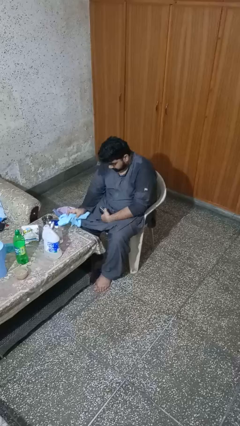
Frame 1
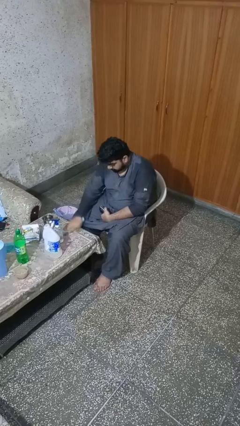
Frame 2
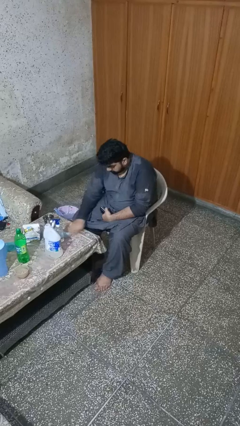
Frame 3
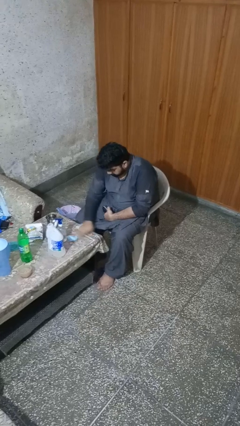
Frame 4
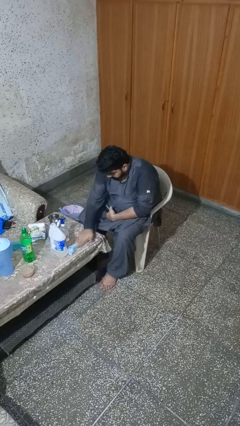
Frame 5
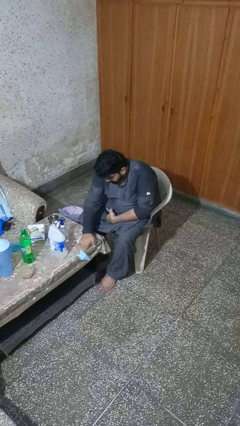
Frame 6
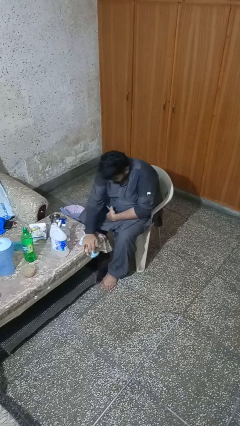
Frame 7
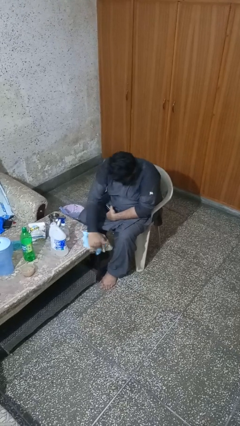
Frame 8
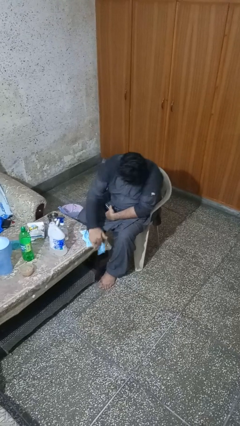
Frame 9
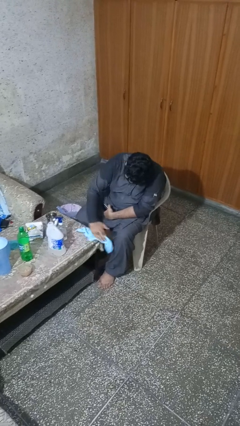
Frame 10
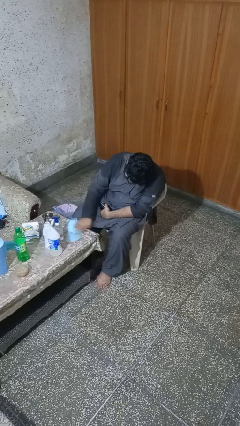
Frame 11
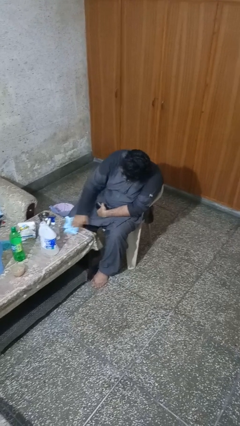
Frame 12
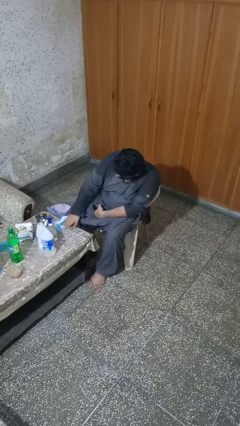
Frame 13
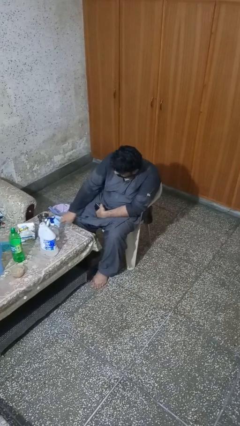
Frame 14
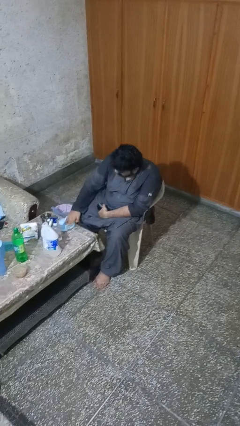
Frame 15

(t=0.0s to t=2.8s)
person cleans table with rag

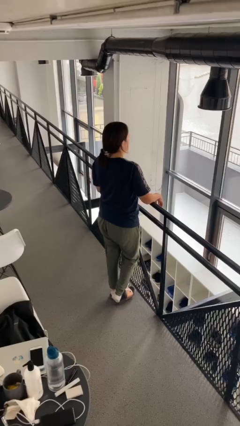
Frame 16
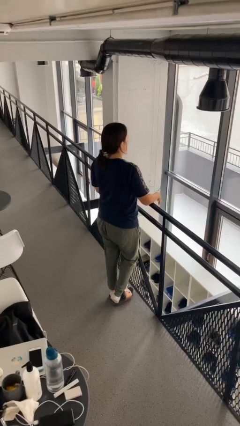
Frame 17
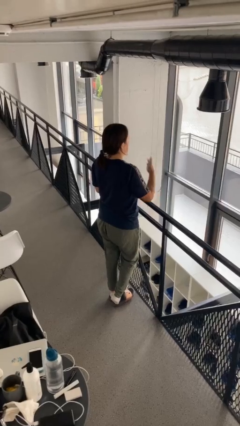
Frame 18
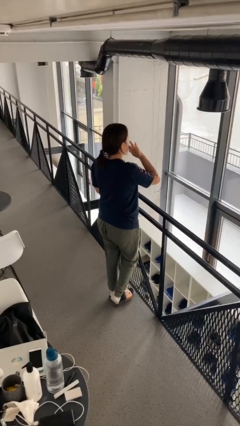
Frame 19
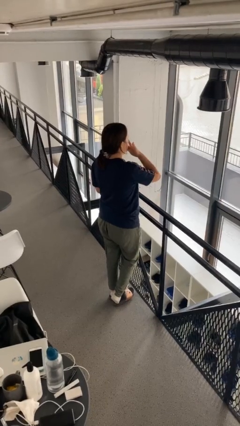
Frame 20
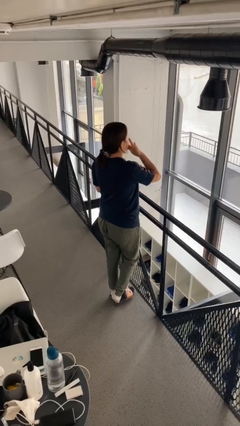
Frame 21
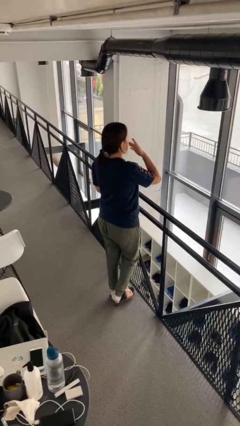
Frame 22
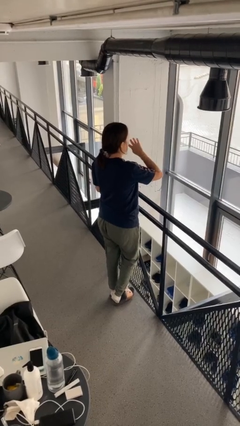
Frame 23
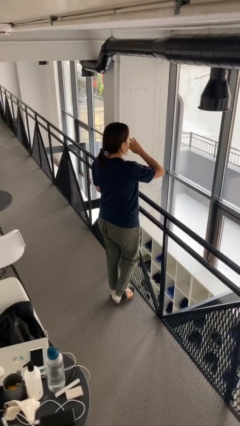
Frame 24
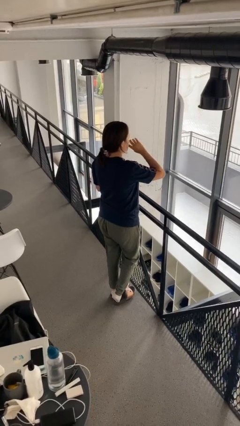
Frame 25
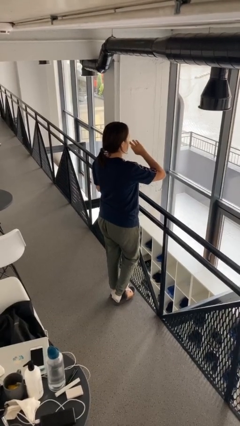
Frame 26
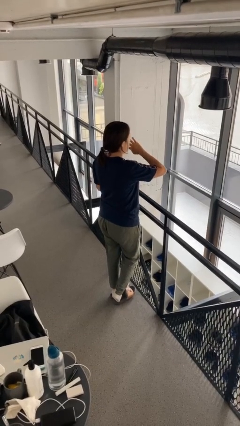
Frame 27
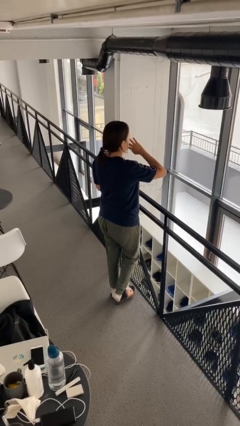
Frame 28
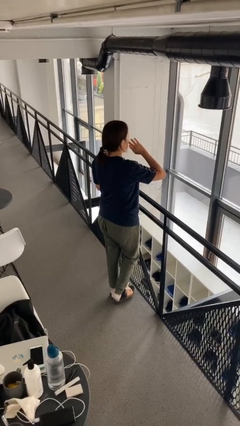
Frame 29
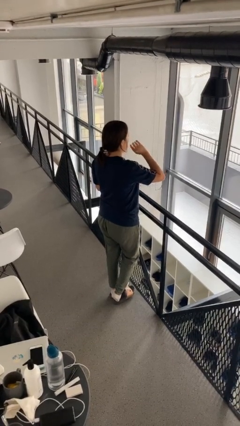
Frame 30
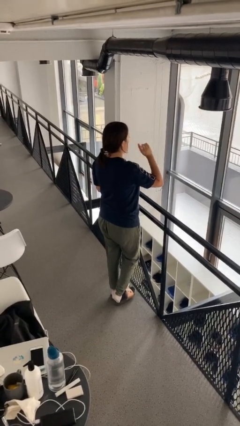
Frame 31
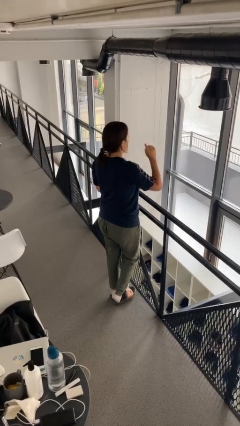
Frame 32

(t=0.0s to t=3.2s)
person licks fingers

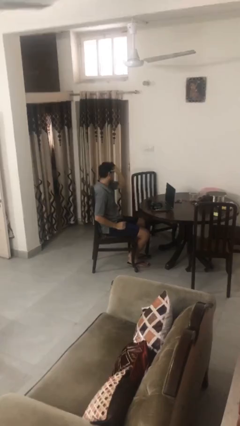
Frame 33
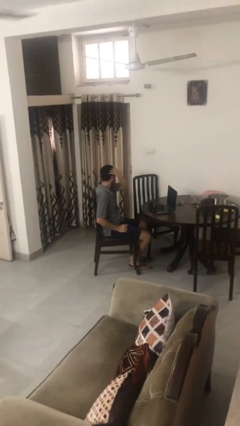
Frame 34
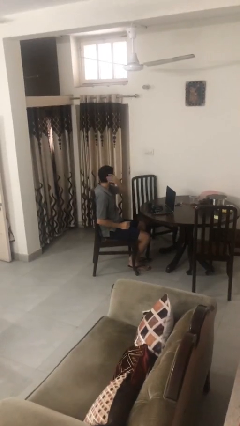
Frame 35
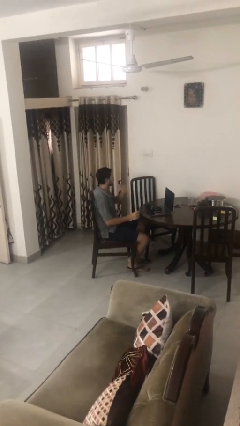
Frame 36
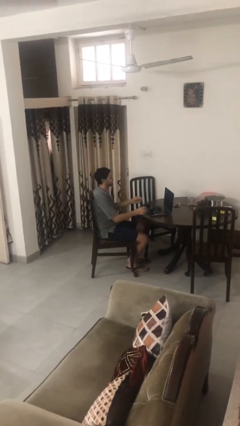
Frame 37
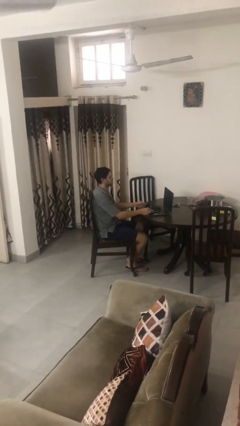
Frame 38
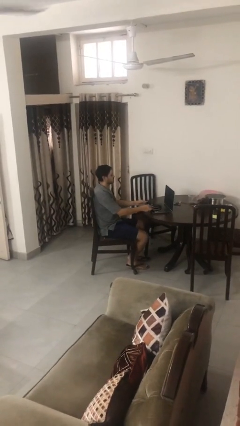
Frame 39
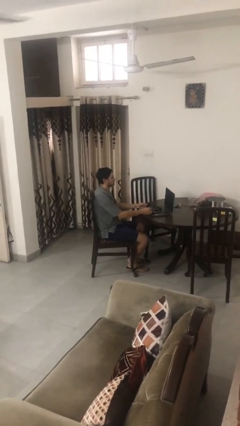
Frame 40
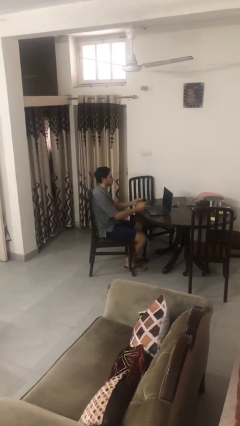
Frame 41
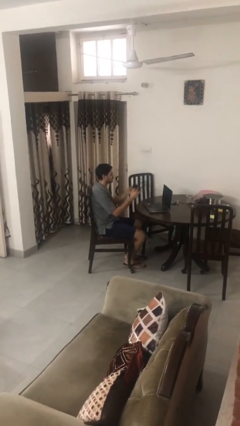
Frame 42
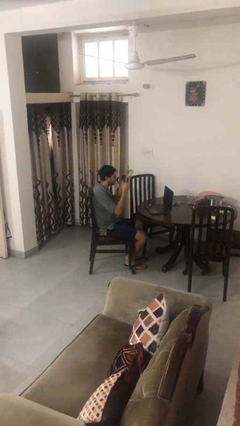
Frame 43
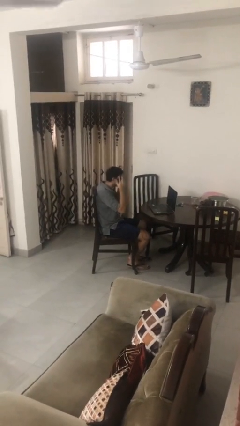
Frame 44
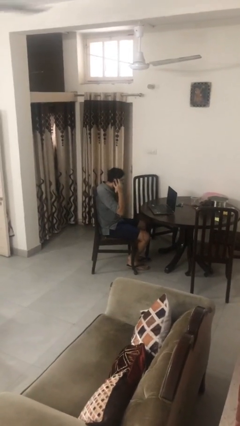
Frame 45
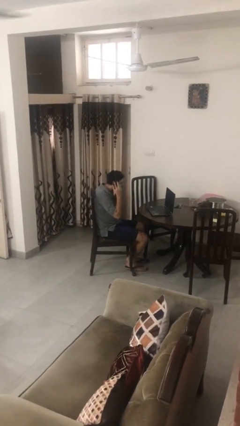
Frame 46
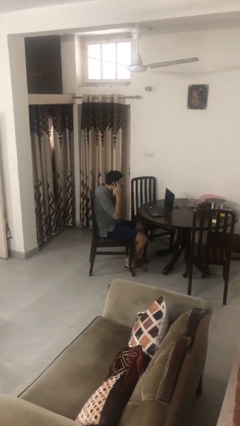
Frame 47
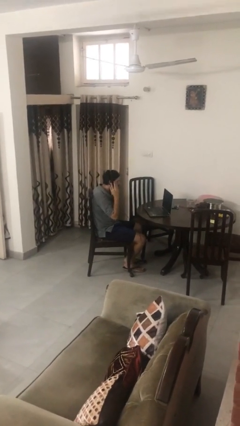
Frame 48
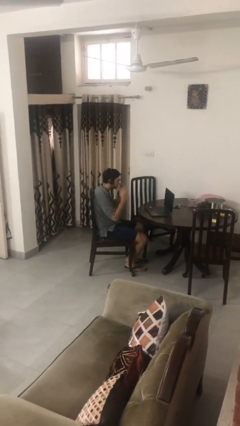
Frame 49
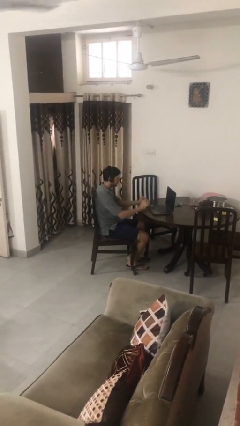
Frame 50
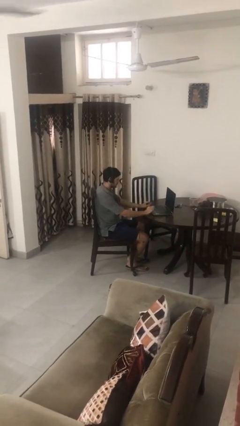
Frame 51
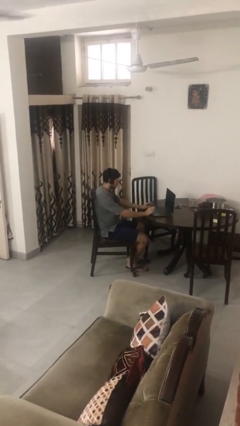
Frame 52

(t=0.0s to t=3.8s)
person puts on headphones

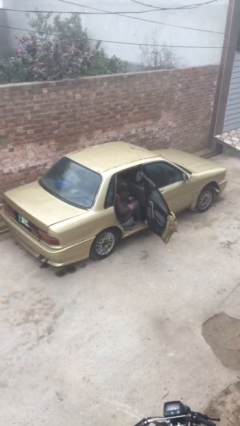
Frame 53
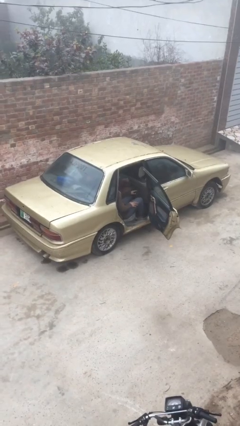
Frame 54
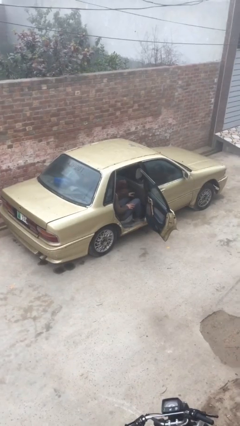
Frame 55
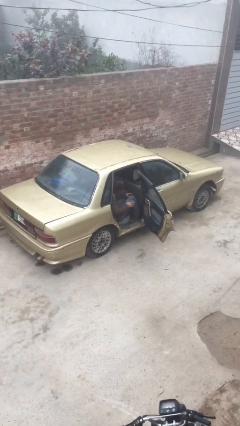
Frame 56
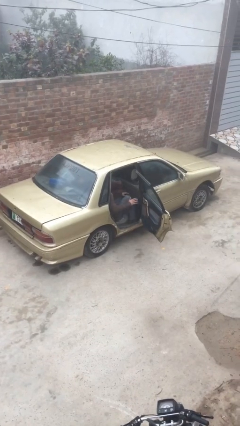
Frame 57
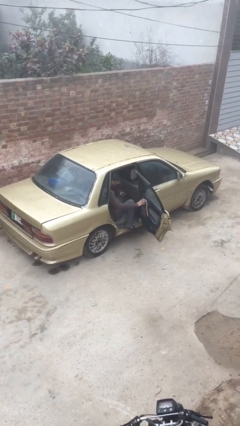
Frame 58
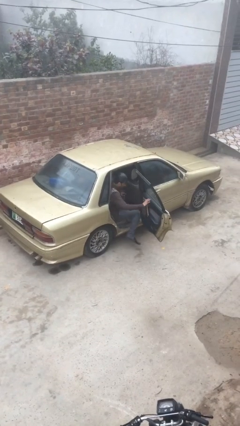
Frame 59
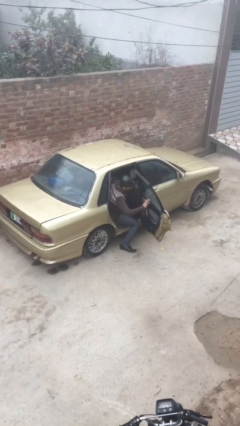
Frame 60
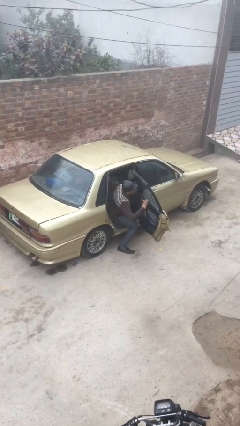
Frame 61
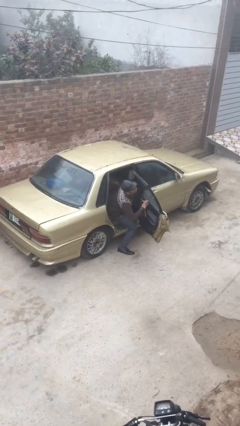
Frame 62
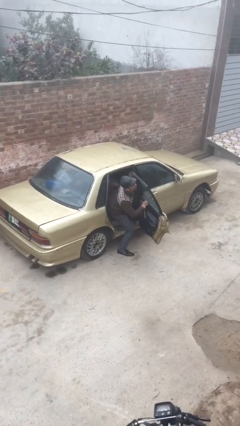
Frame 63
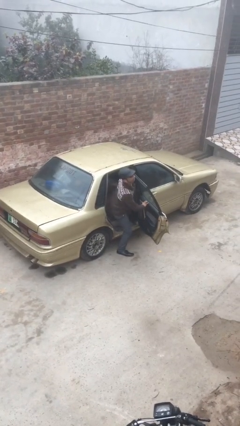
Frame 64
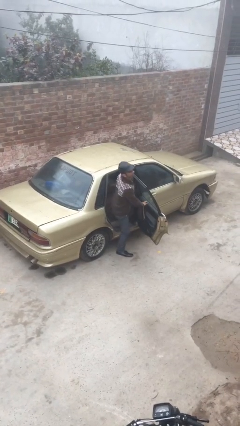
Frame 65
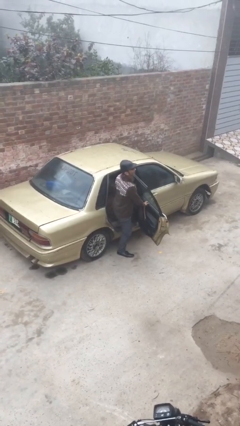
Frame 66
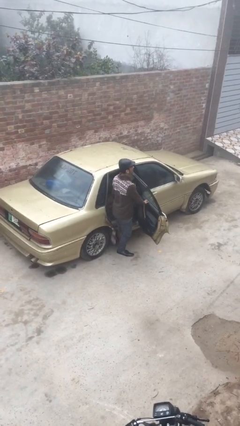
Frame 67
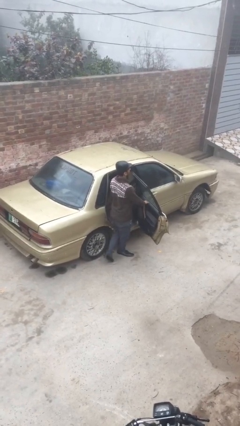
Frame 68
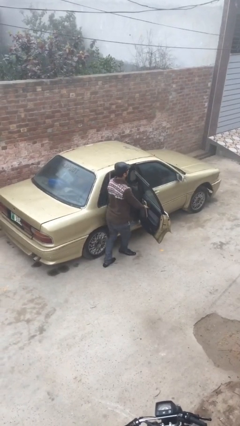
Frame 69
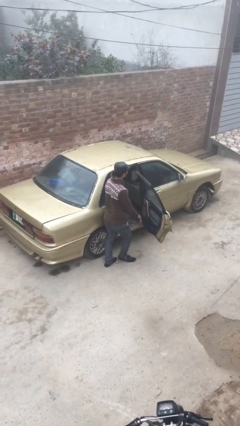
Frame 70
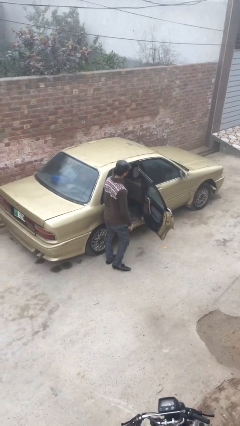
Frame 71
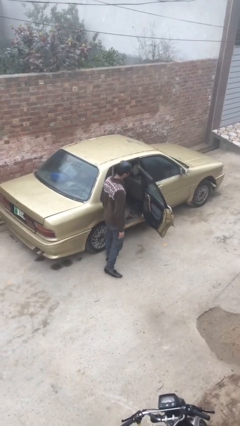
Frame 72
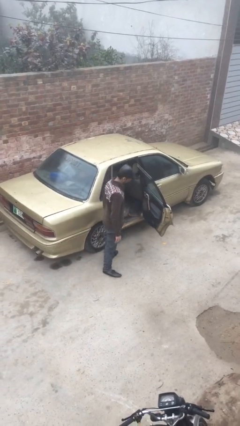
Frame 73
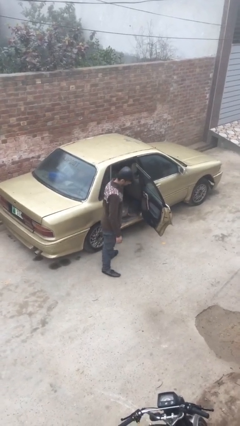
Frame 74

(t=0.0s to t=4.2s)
person exits car

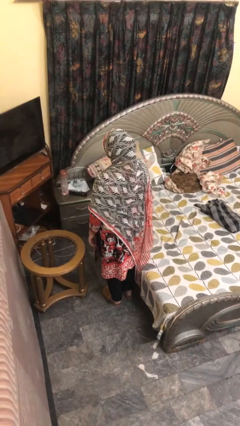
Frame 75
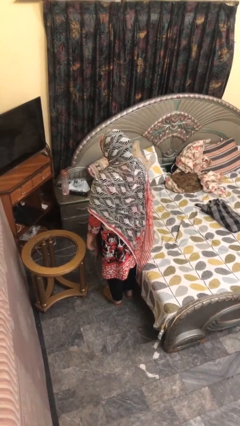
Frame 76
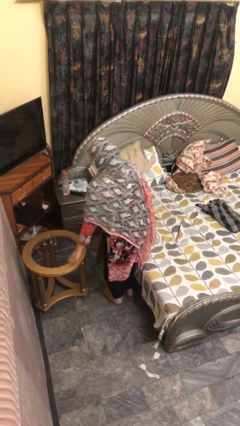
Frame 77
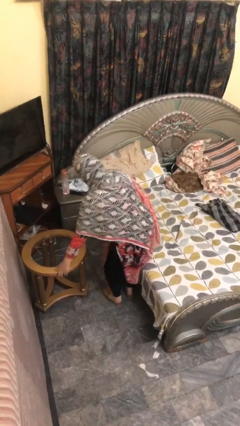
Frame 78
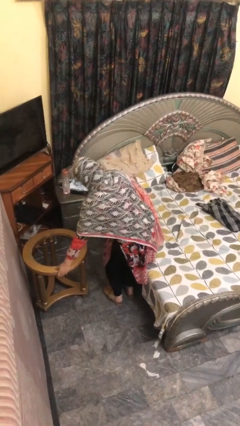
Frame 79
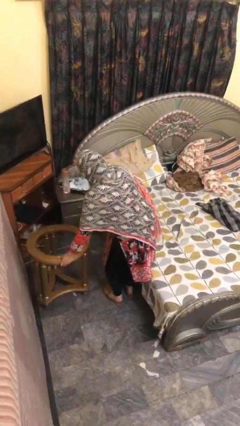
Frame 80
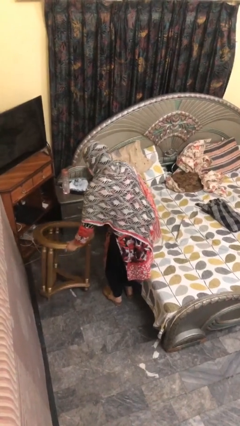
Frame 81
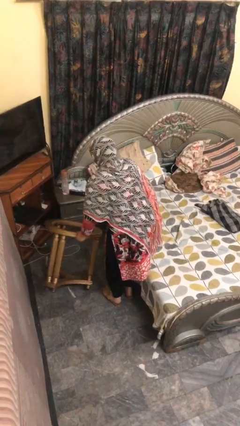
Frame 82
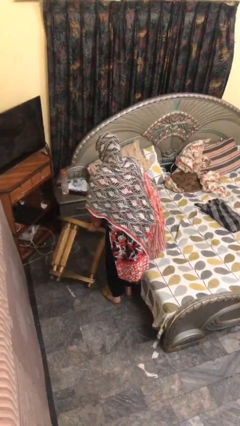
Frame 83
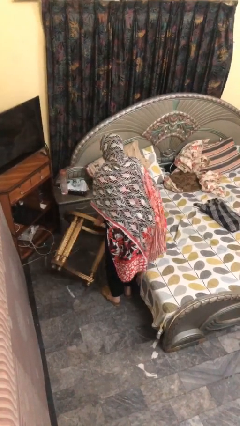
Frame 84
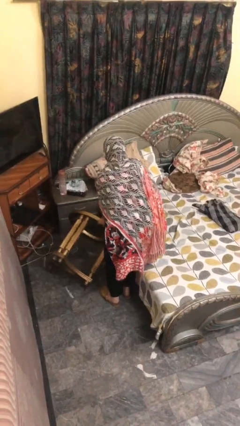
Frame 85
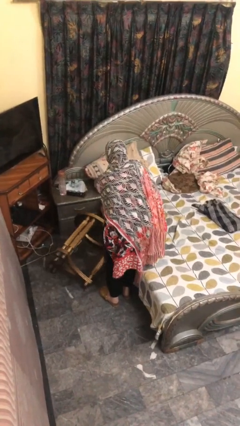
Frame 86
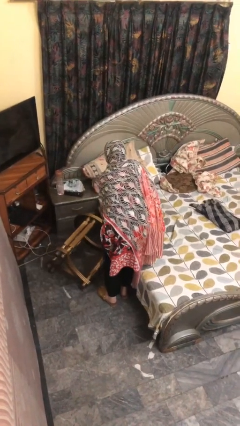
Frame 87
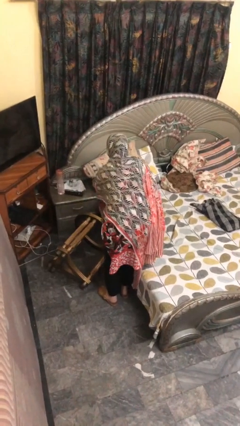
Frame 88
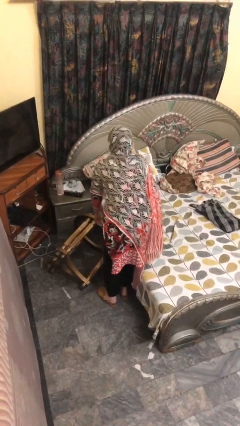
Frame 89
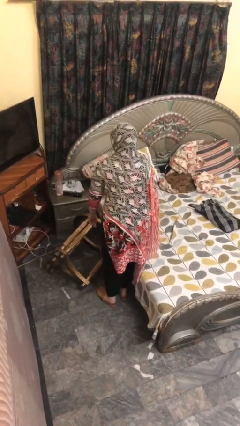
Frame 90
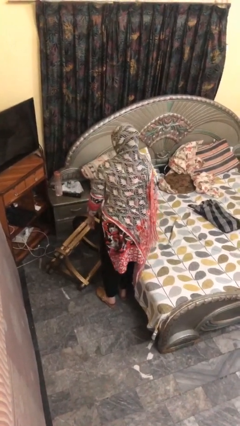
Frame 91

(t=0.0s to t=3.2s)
person knocks over furniture

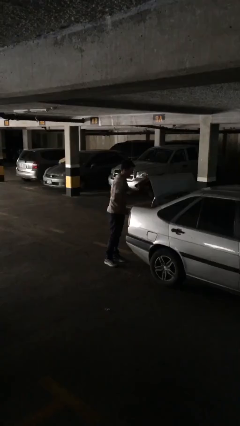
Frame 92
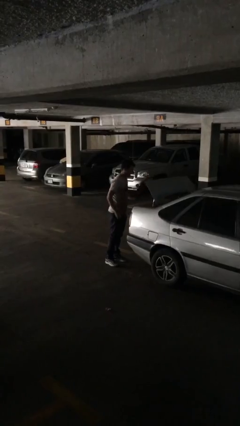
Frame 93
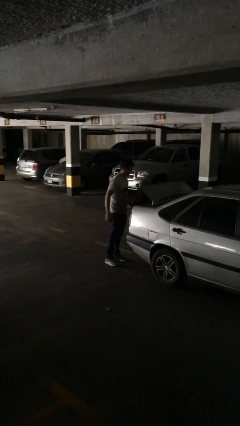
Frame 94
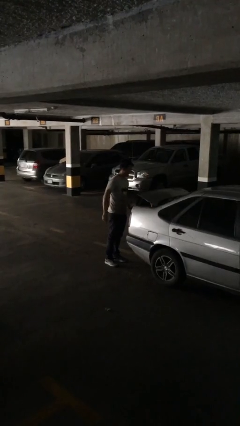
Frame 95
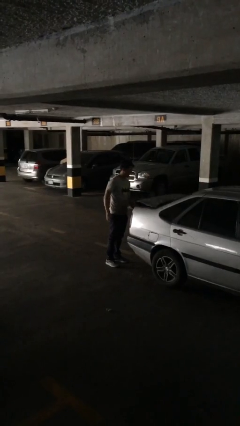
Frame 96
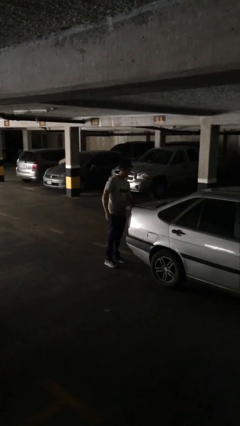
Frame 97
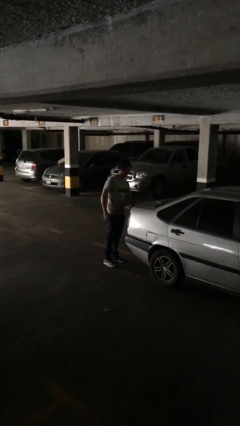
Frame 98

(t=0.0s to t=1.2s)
person closes car trunk
